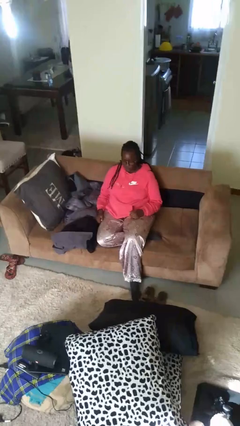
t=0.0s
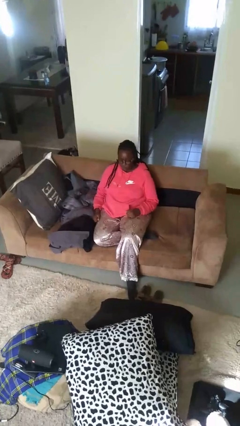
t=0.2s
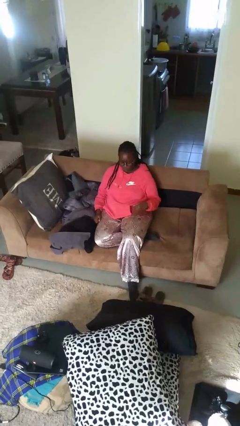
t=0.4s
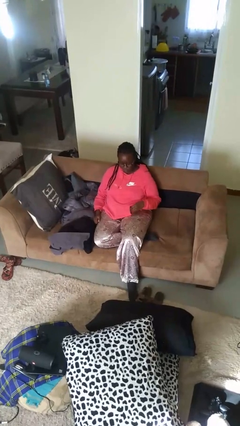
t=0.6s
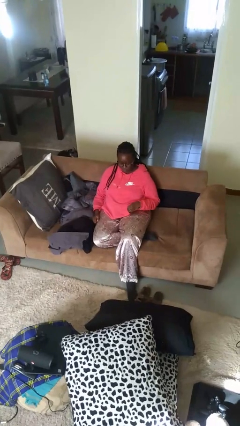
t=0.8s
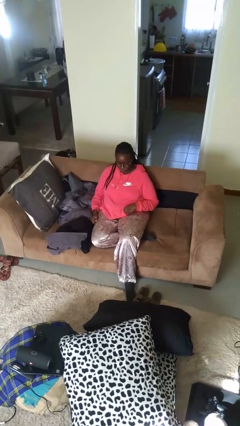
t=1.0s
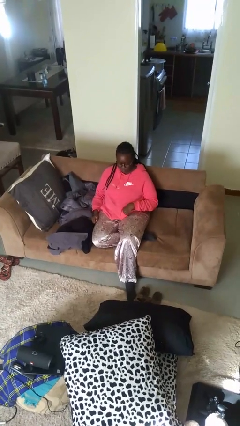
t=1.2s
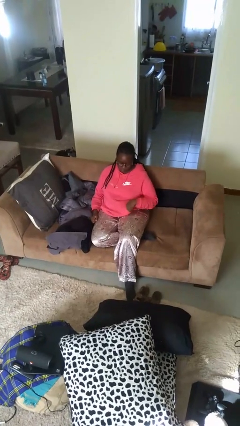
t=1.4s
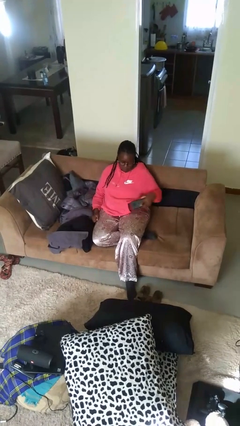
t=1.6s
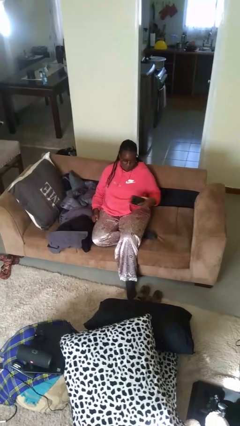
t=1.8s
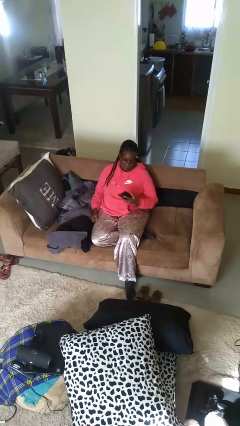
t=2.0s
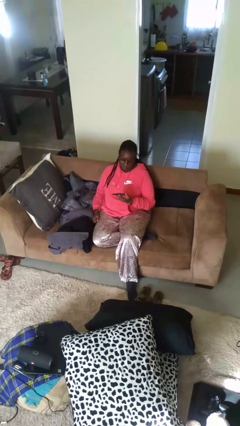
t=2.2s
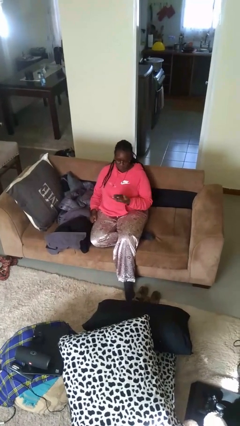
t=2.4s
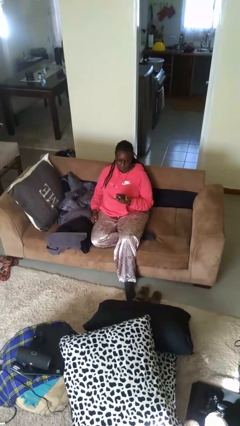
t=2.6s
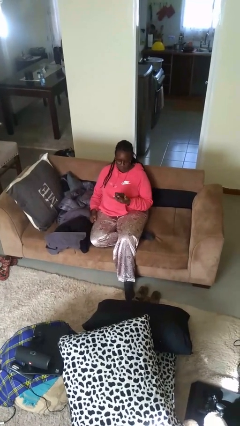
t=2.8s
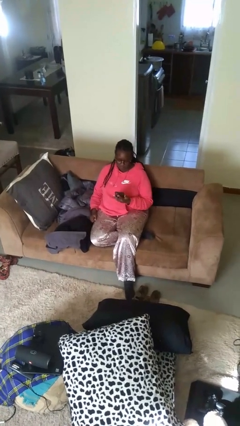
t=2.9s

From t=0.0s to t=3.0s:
person takes phone from pocket

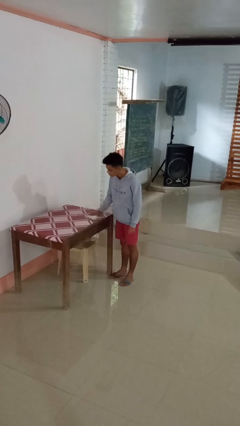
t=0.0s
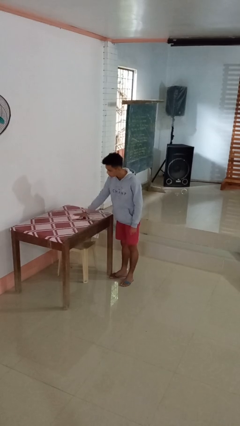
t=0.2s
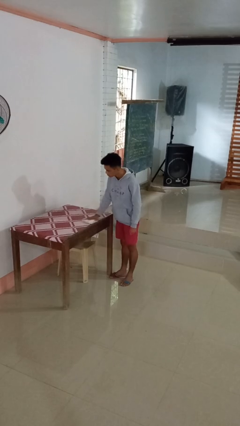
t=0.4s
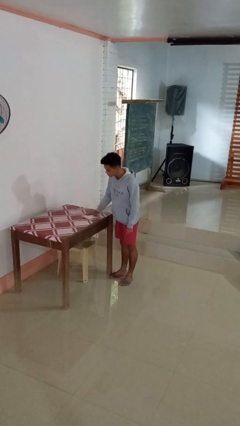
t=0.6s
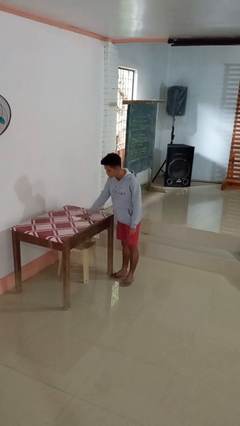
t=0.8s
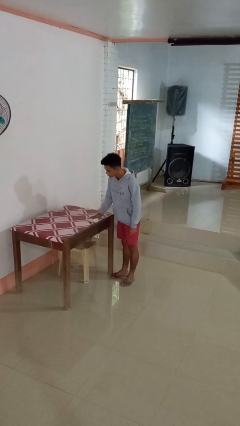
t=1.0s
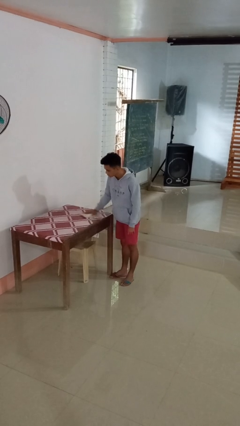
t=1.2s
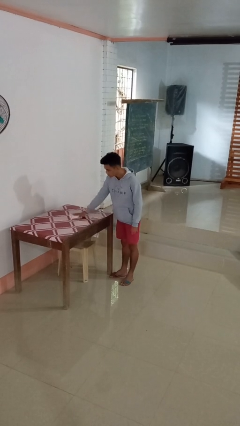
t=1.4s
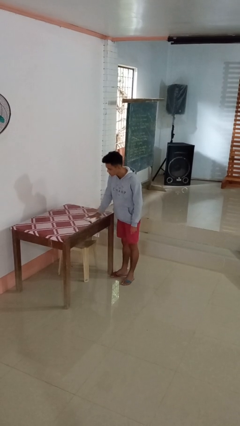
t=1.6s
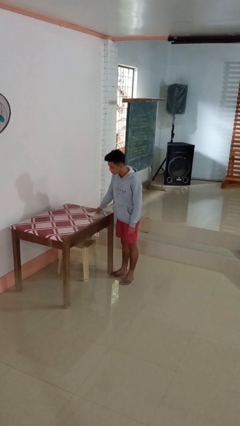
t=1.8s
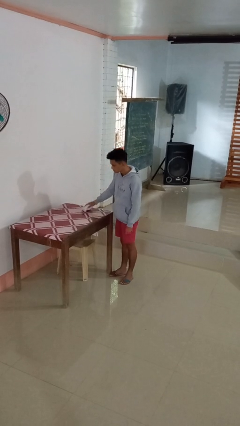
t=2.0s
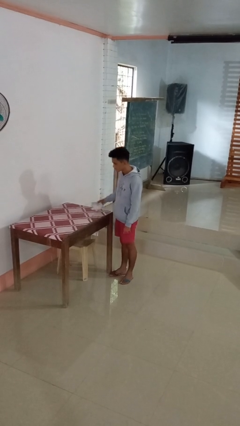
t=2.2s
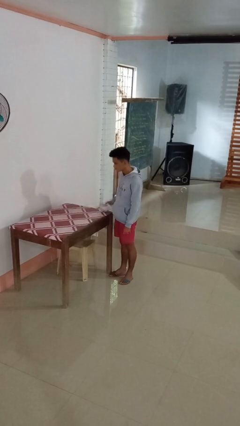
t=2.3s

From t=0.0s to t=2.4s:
person cleans table with rag

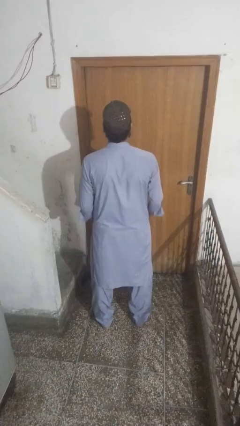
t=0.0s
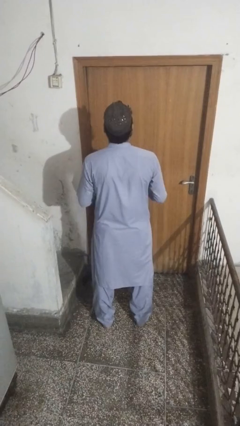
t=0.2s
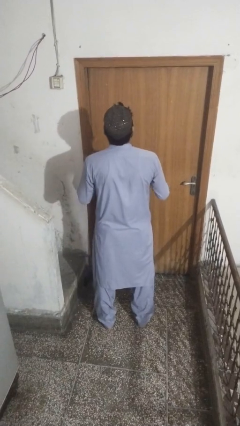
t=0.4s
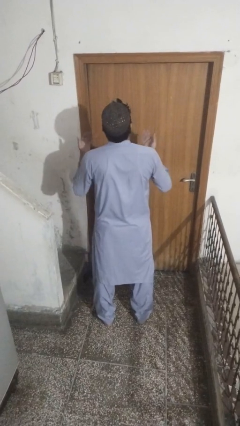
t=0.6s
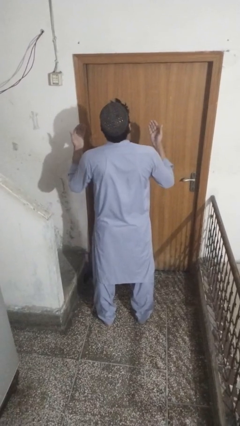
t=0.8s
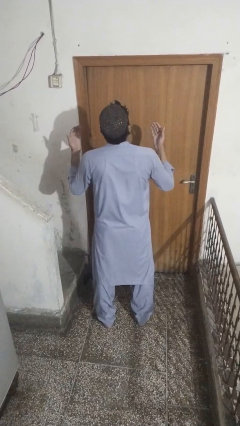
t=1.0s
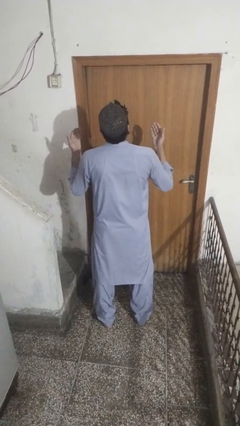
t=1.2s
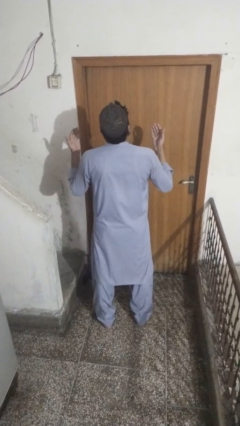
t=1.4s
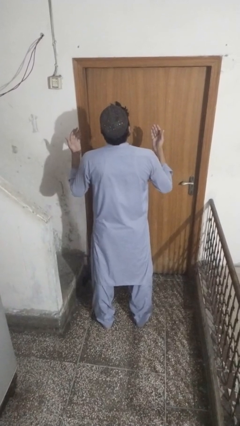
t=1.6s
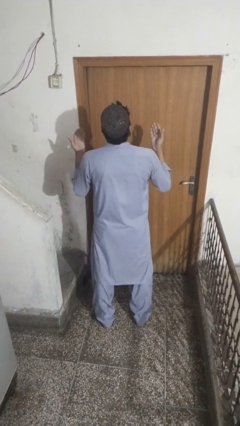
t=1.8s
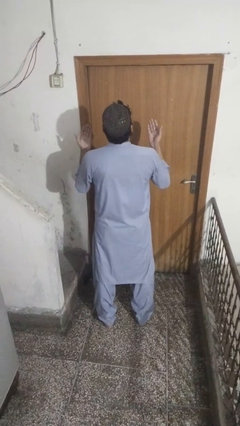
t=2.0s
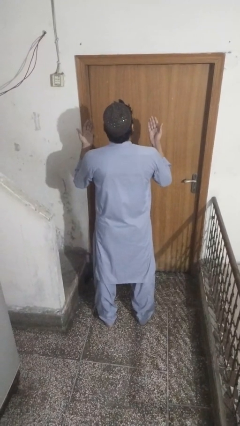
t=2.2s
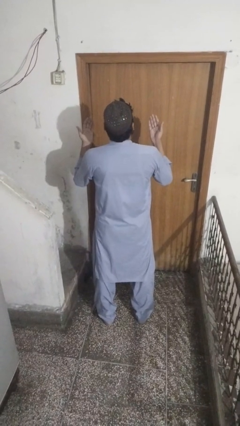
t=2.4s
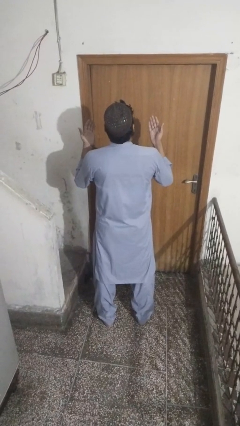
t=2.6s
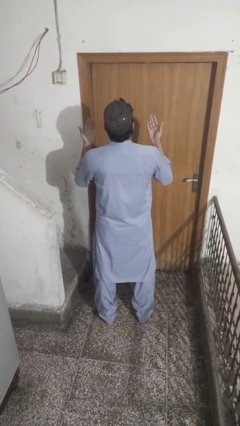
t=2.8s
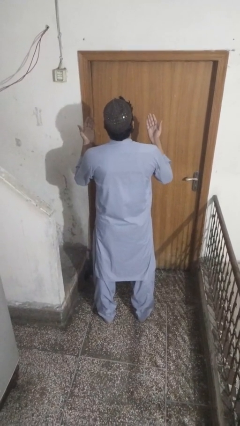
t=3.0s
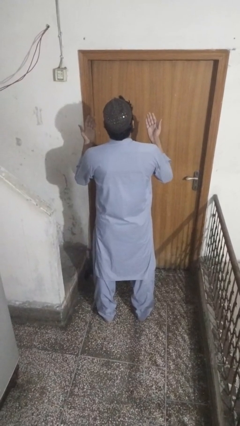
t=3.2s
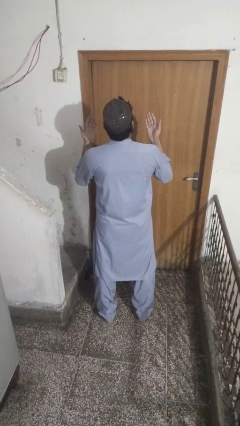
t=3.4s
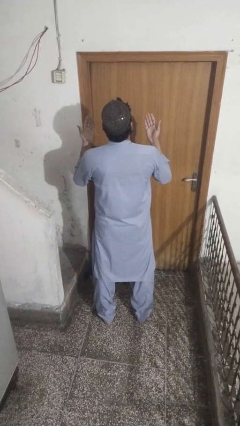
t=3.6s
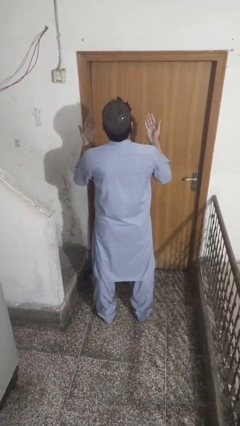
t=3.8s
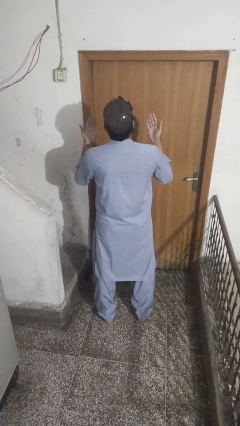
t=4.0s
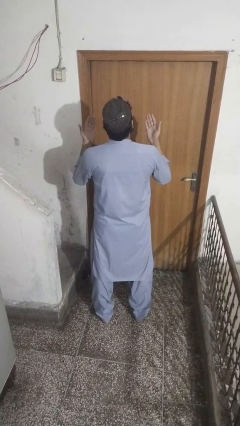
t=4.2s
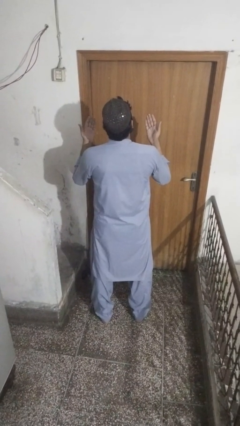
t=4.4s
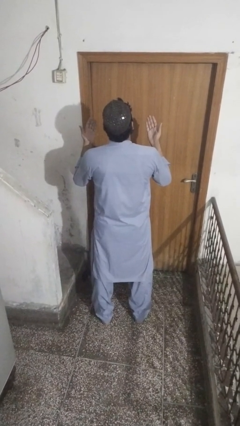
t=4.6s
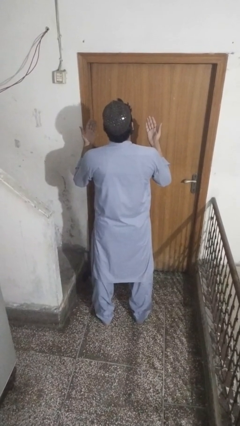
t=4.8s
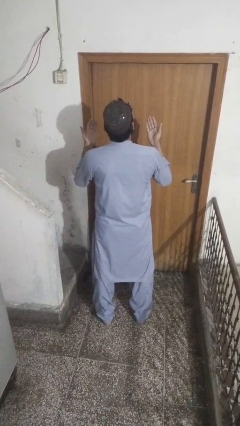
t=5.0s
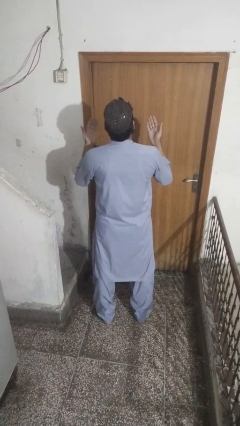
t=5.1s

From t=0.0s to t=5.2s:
person prays

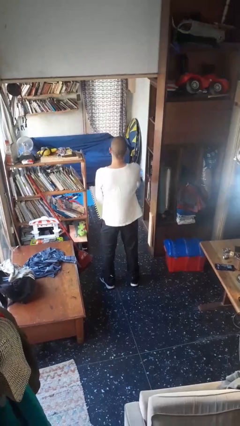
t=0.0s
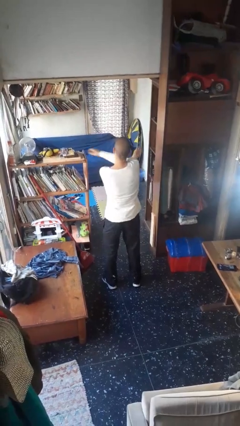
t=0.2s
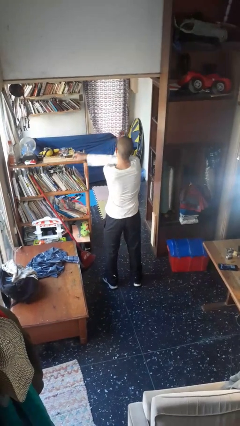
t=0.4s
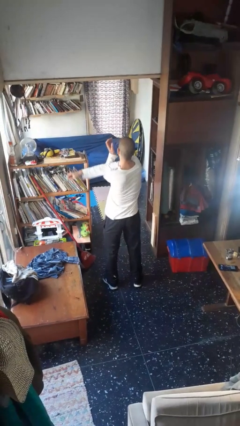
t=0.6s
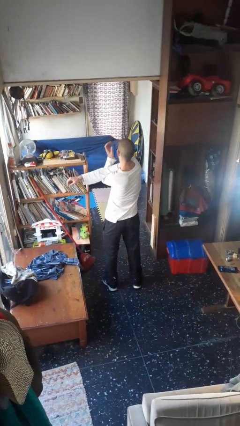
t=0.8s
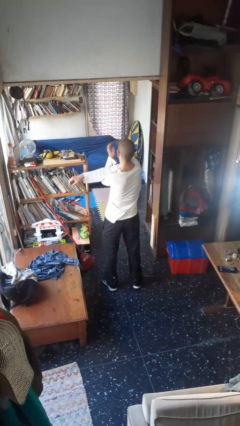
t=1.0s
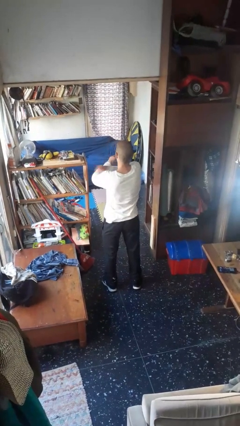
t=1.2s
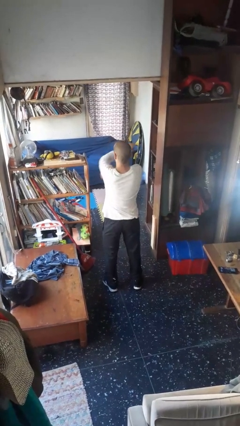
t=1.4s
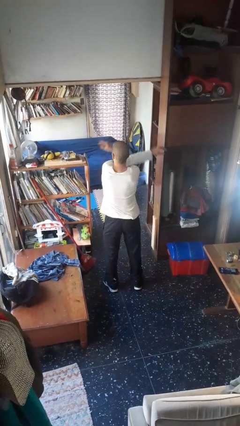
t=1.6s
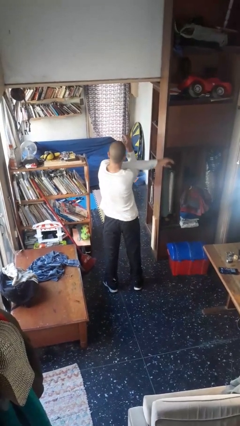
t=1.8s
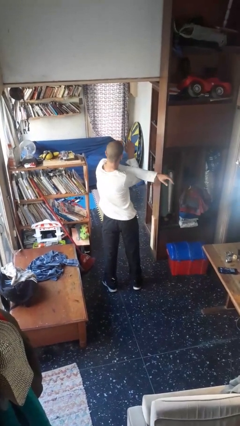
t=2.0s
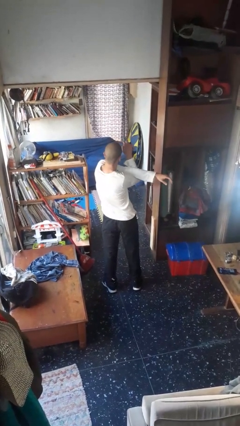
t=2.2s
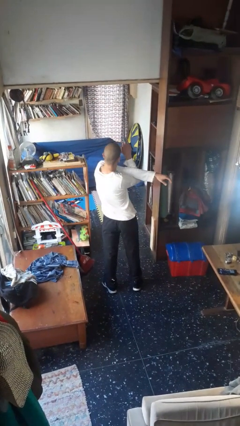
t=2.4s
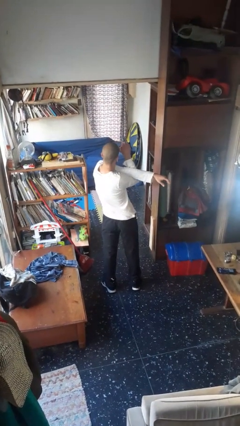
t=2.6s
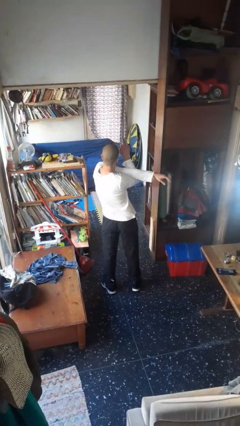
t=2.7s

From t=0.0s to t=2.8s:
person stretches arms to side

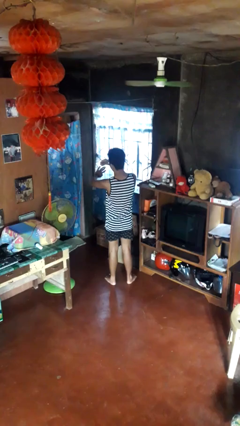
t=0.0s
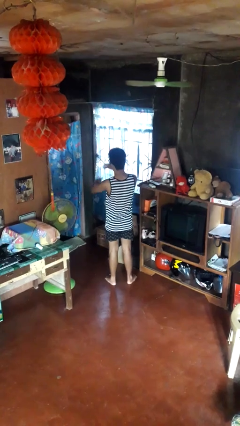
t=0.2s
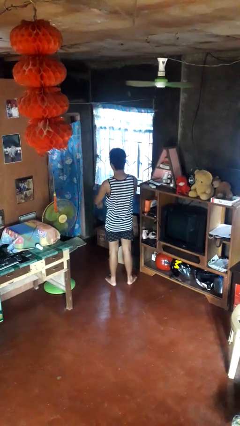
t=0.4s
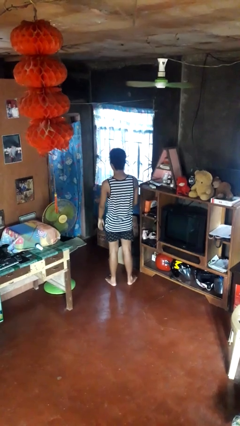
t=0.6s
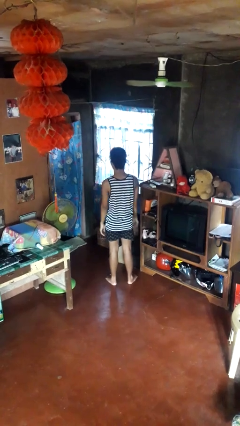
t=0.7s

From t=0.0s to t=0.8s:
person takes off ring

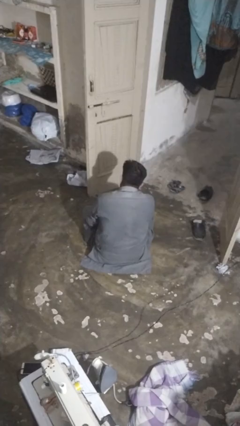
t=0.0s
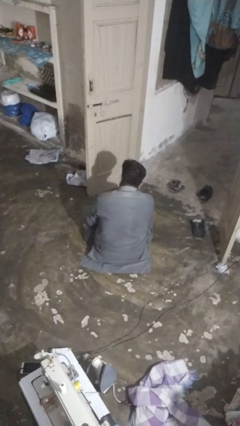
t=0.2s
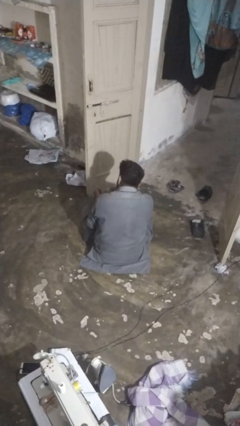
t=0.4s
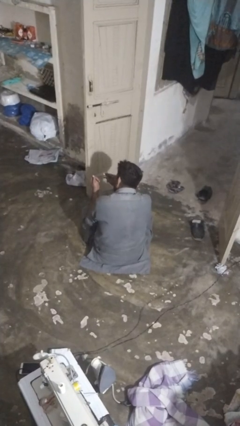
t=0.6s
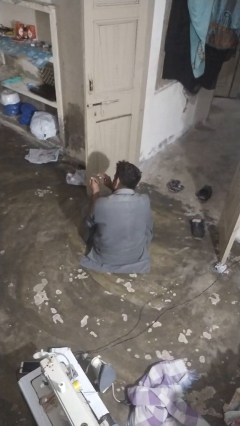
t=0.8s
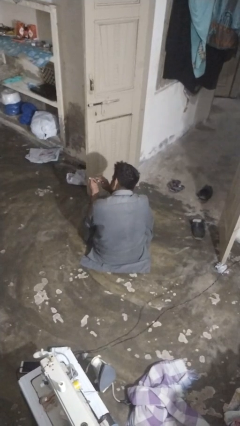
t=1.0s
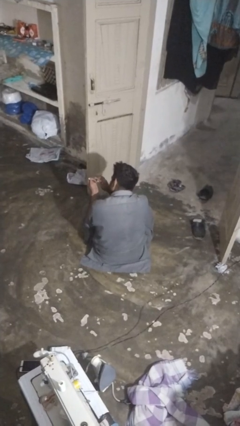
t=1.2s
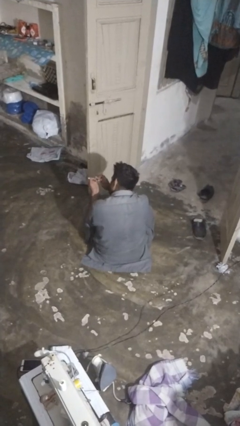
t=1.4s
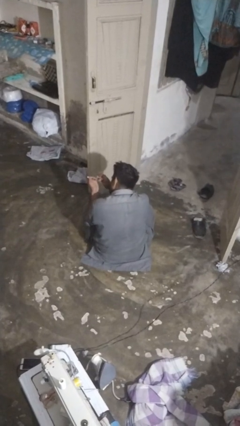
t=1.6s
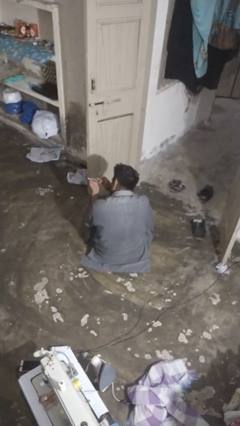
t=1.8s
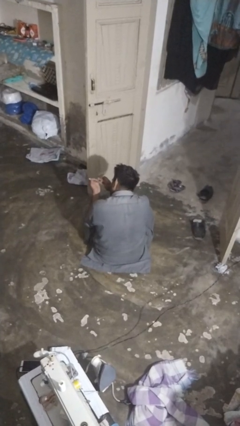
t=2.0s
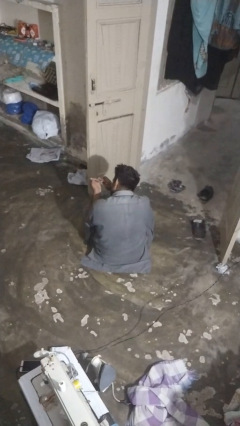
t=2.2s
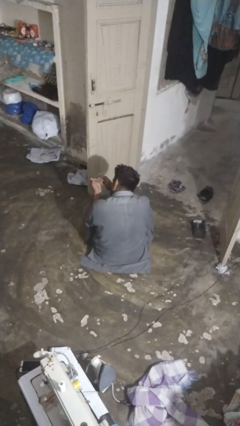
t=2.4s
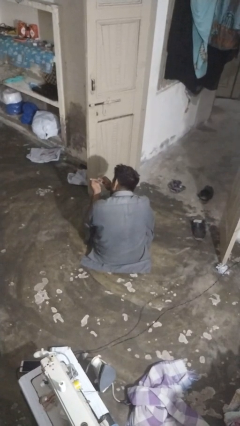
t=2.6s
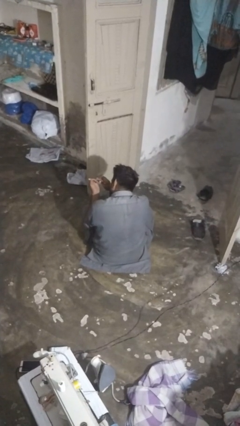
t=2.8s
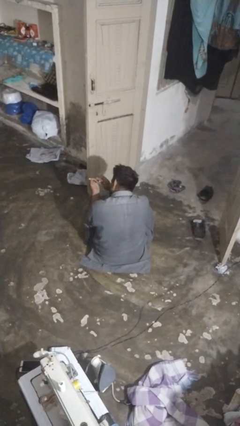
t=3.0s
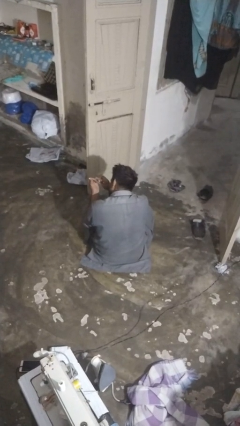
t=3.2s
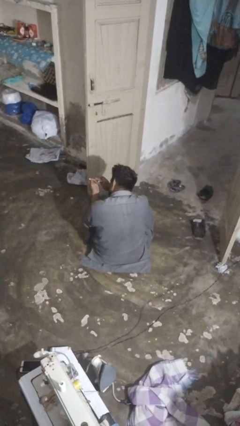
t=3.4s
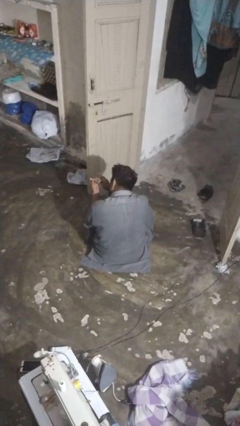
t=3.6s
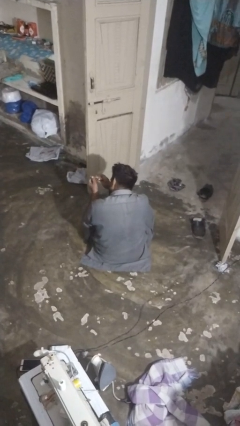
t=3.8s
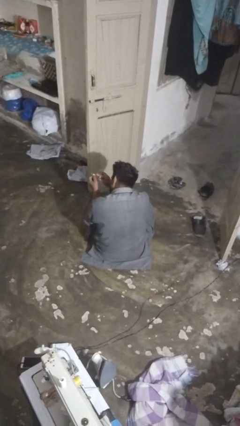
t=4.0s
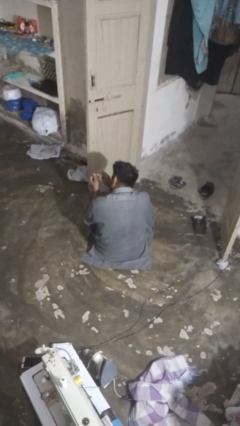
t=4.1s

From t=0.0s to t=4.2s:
person files fingernails
